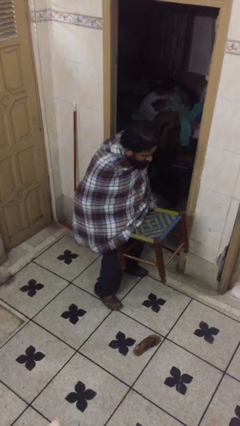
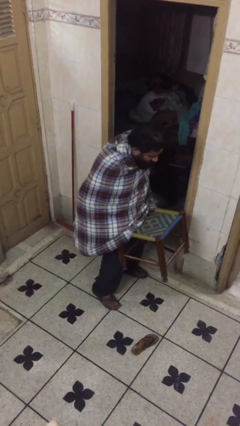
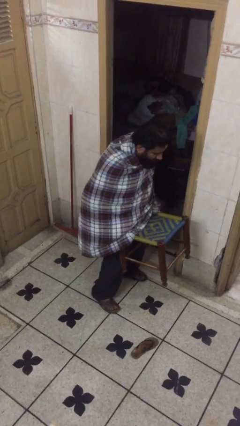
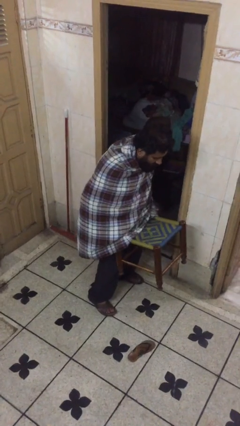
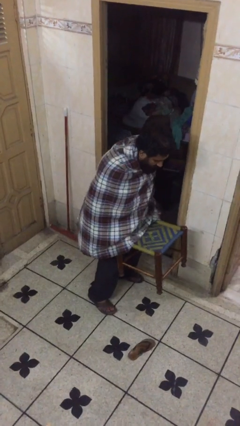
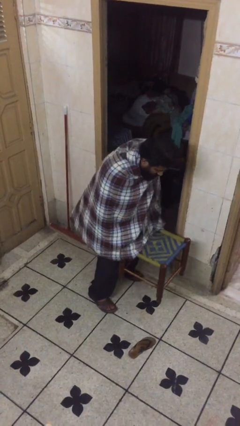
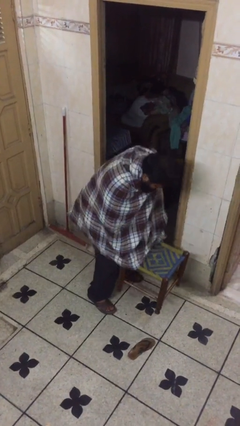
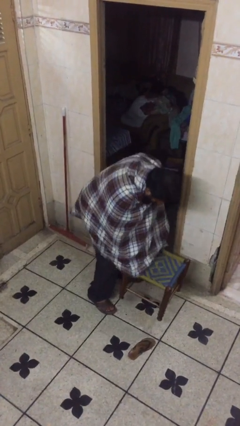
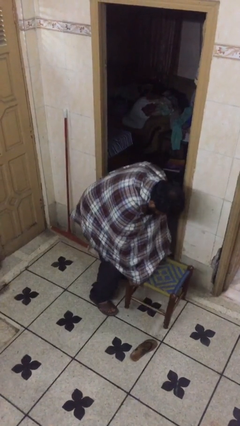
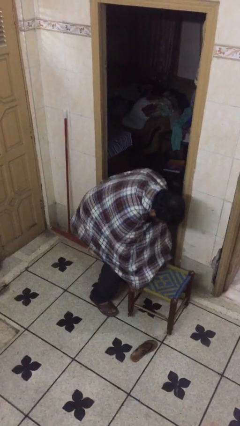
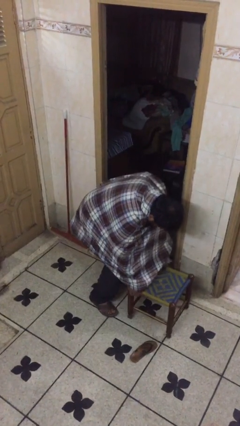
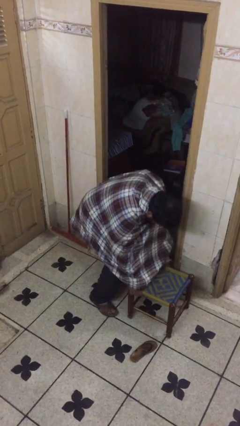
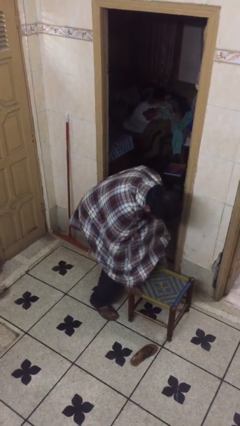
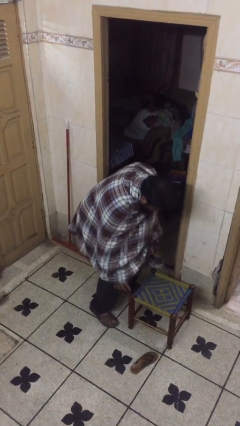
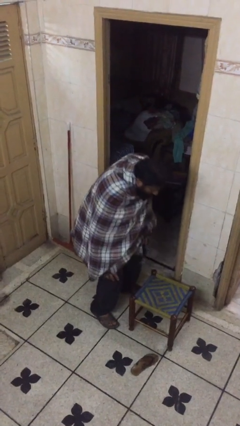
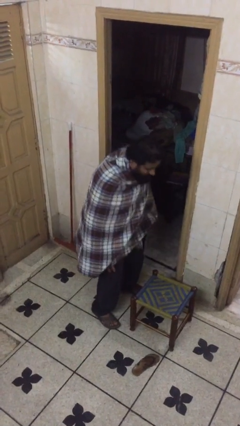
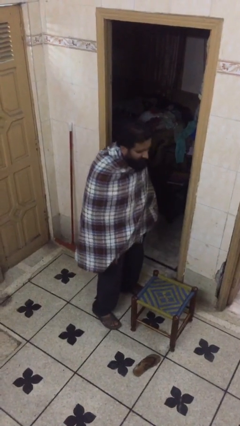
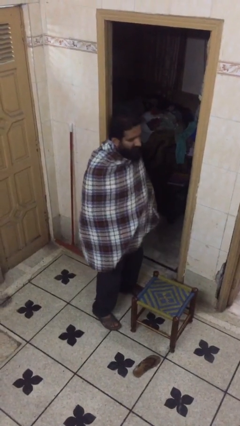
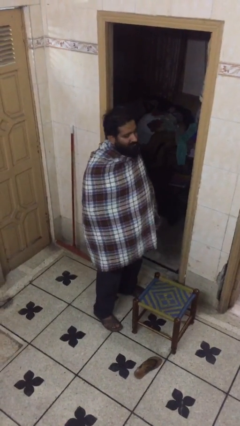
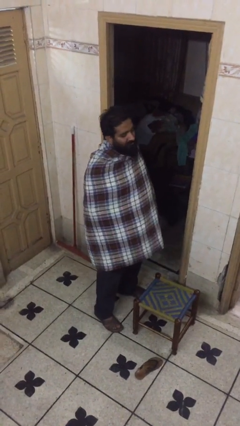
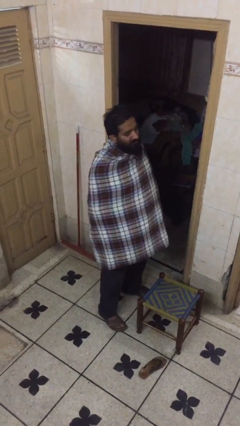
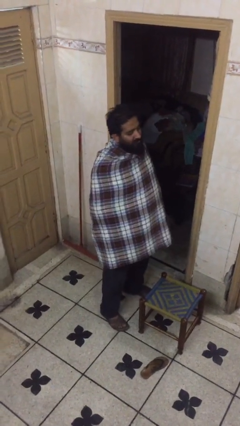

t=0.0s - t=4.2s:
person puts down object on floor

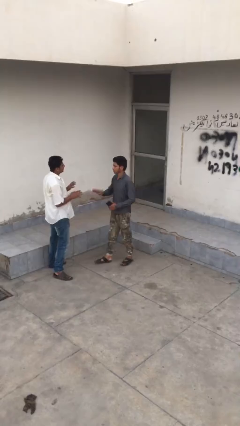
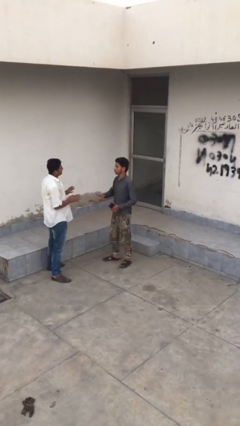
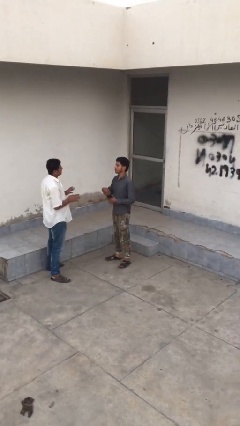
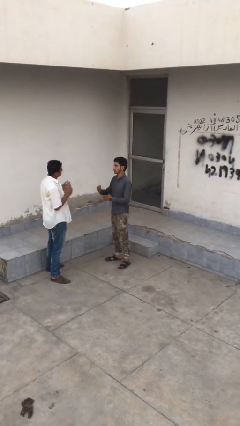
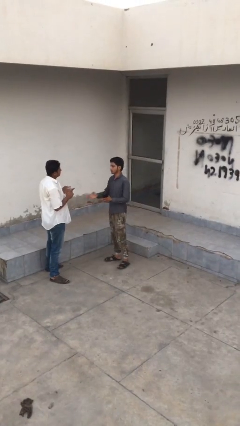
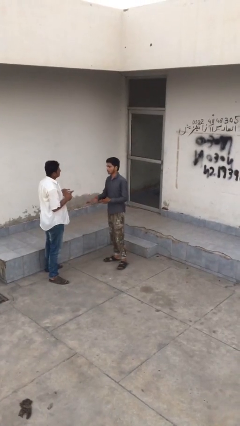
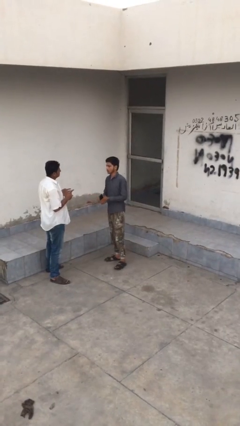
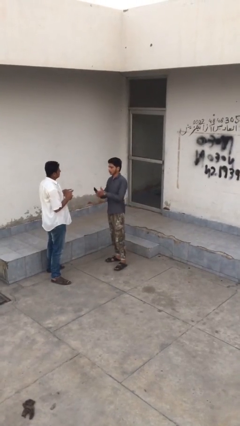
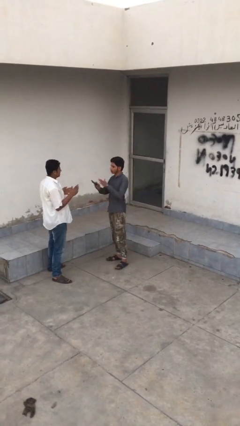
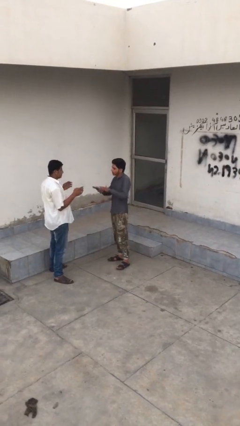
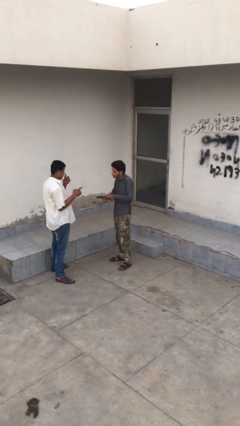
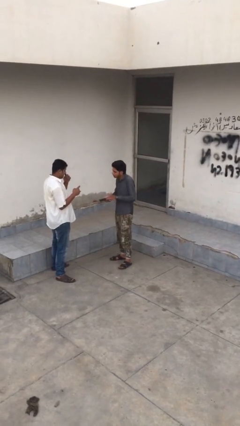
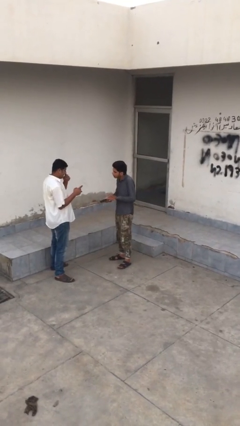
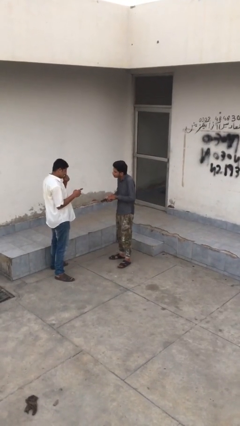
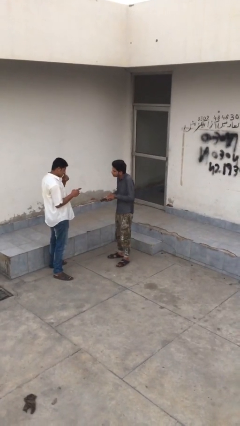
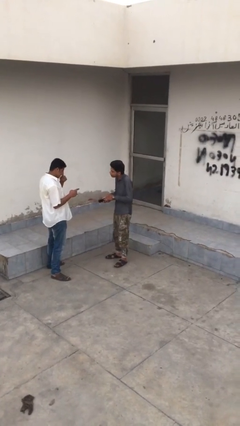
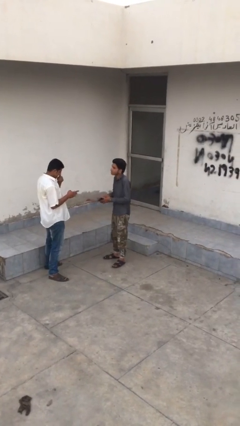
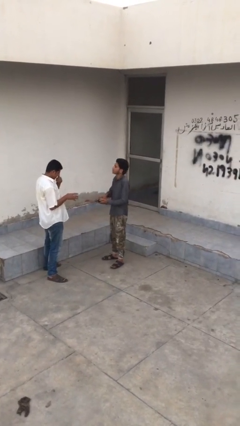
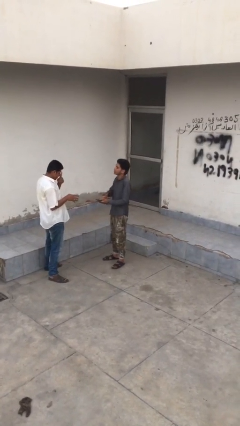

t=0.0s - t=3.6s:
person talks to person

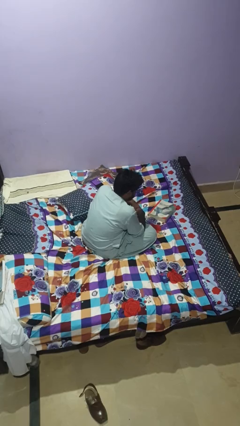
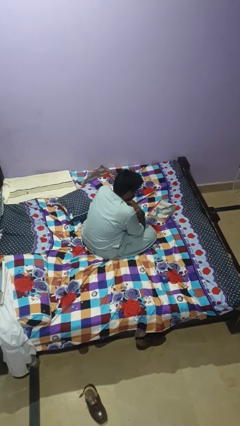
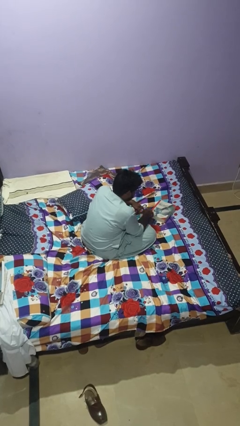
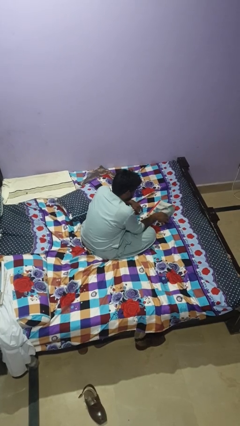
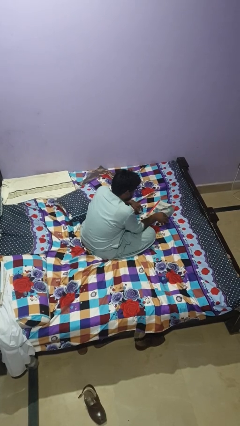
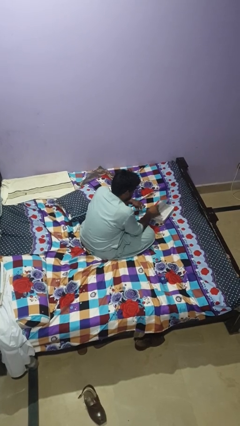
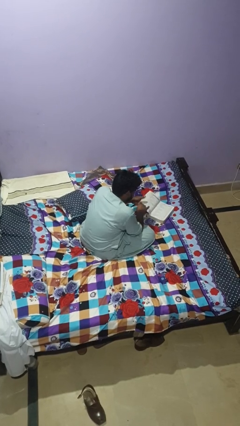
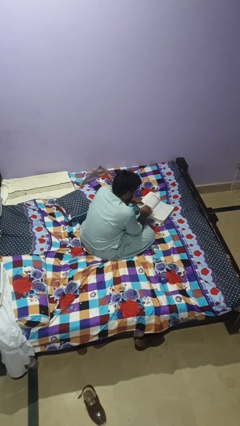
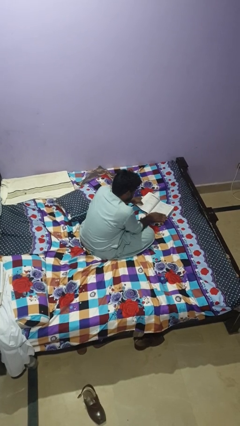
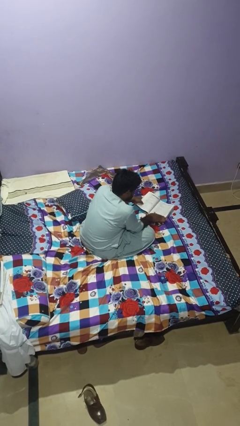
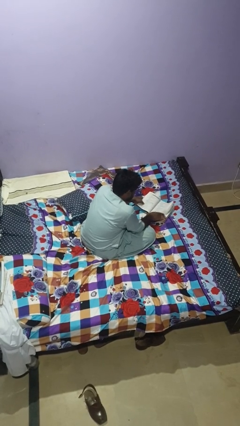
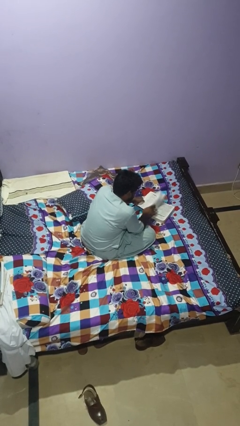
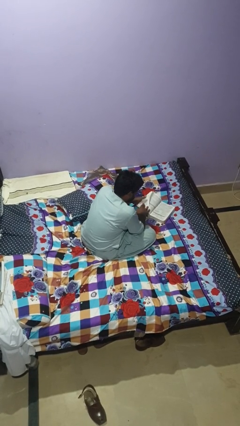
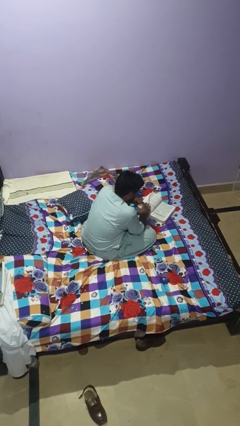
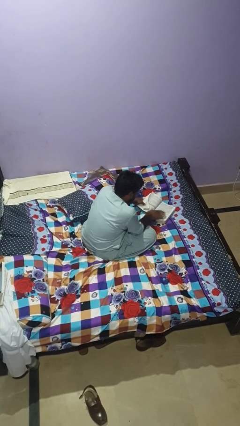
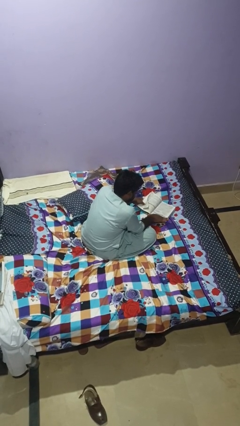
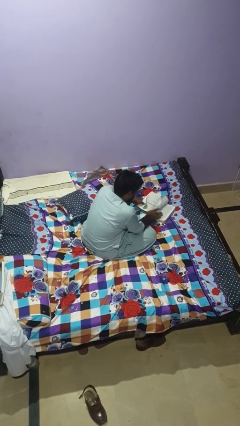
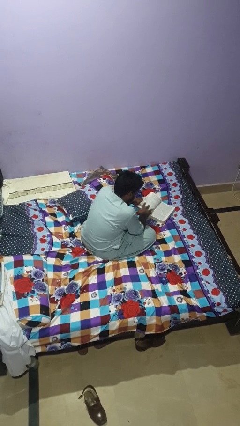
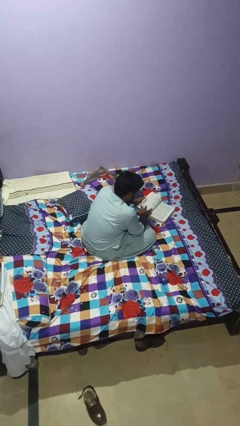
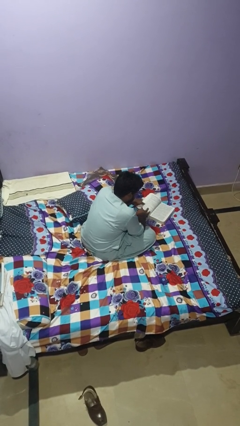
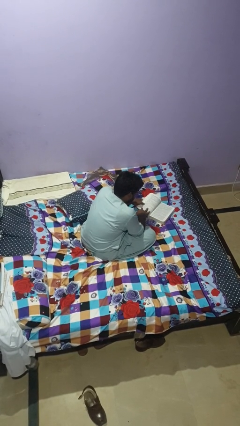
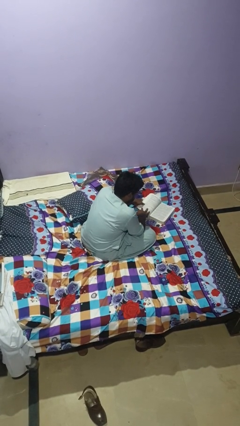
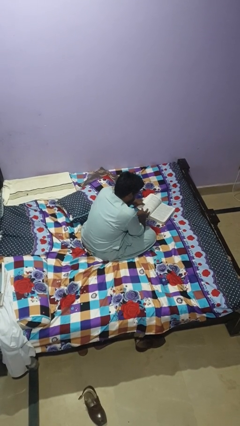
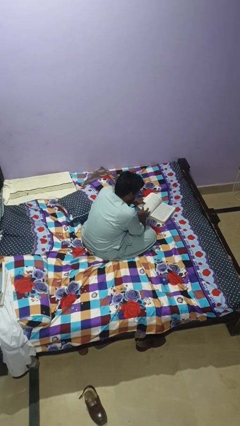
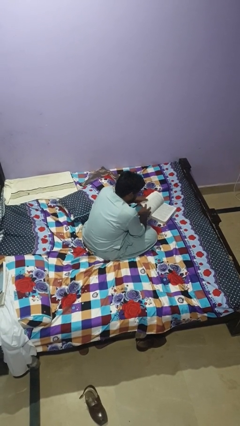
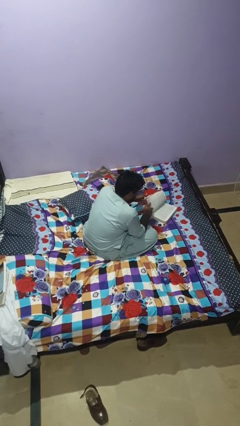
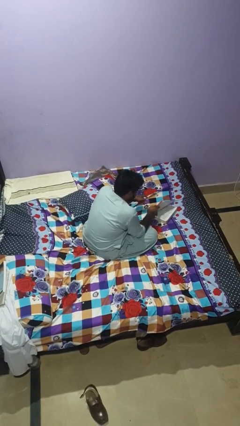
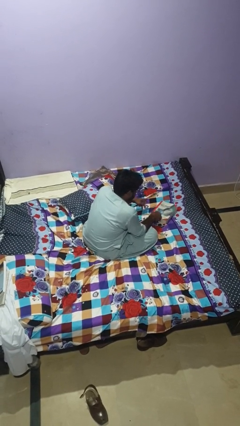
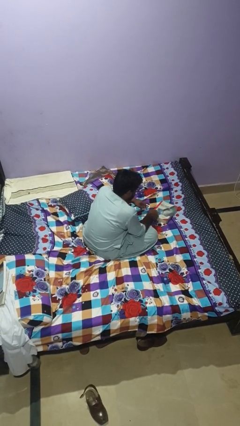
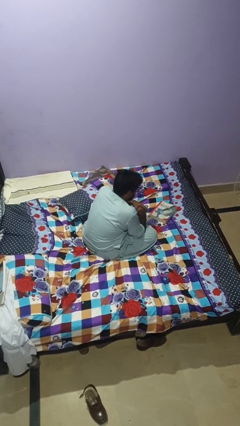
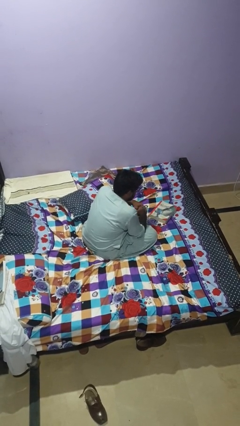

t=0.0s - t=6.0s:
person reads book

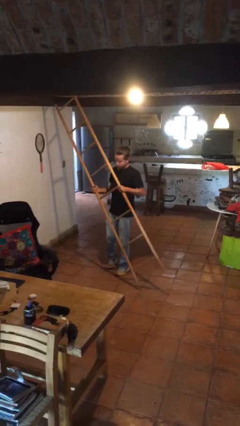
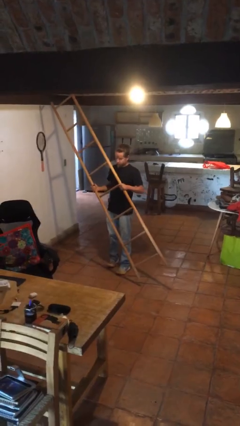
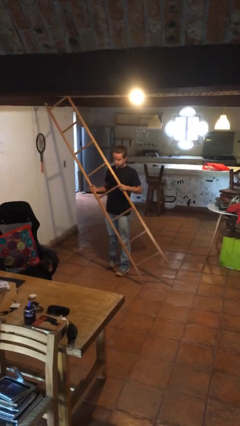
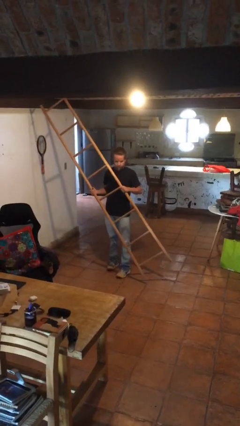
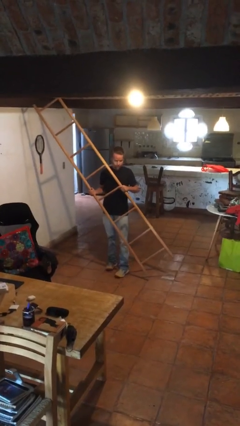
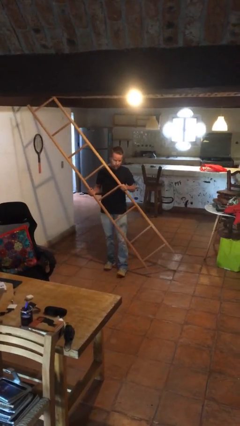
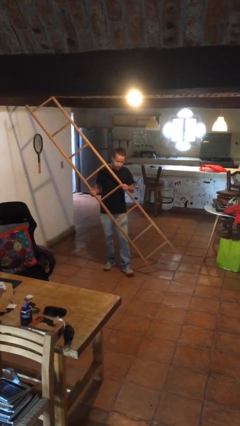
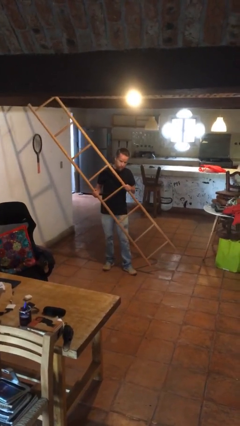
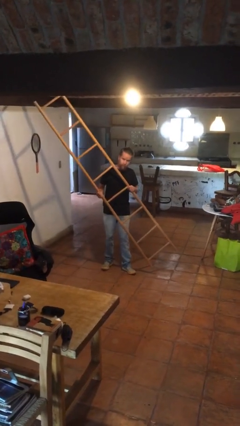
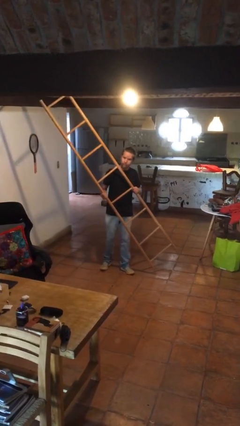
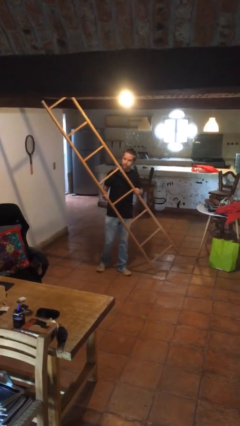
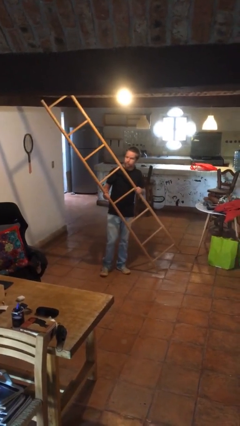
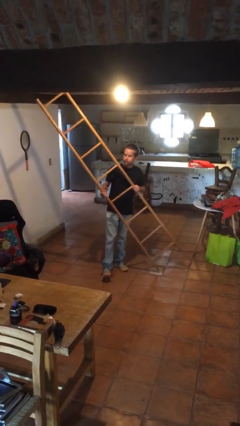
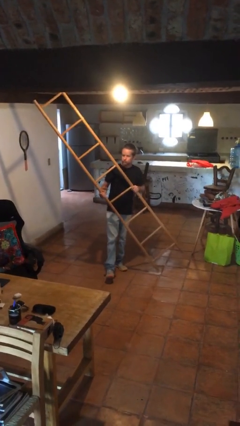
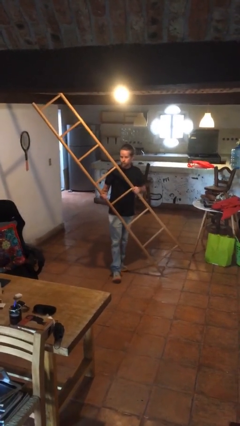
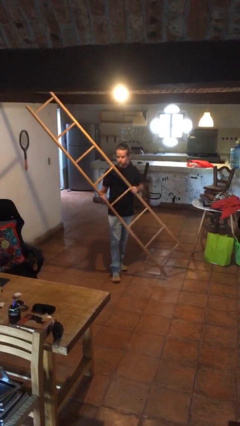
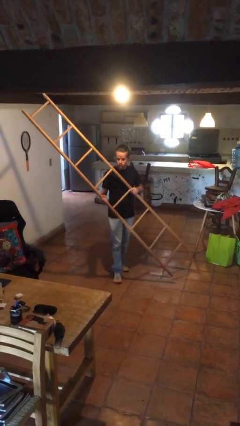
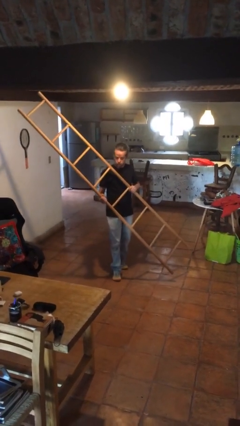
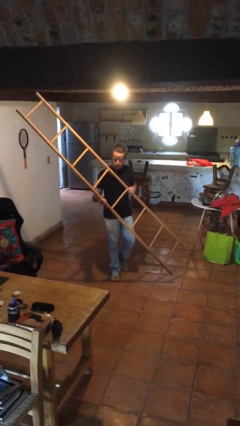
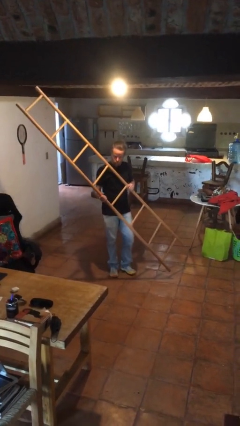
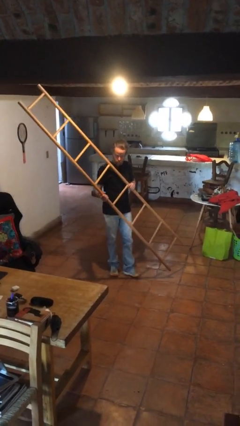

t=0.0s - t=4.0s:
person carries furniture
